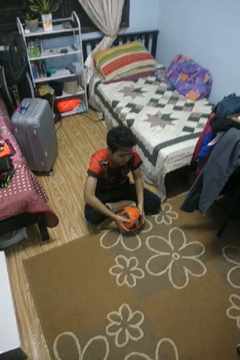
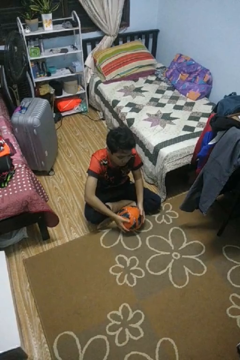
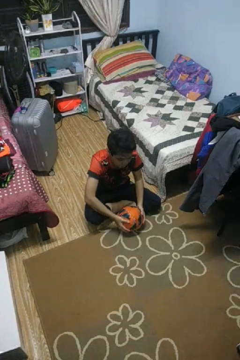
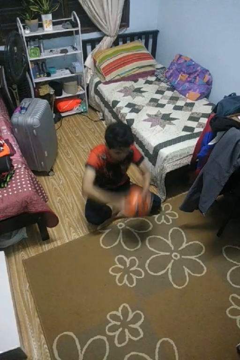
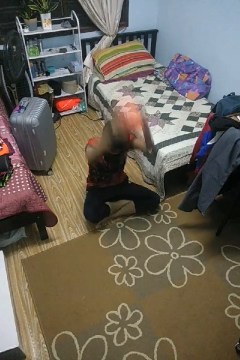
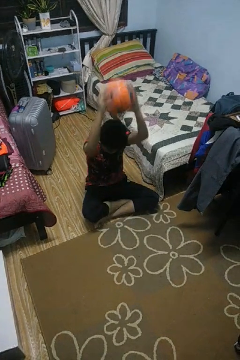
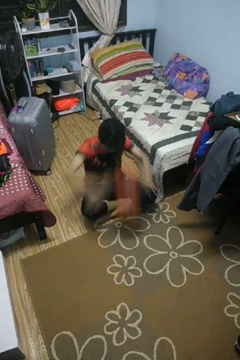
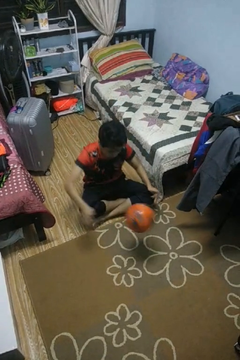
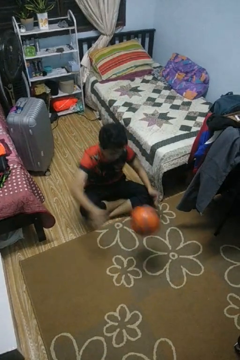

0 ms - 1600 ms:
person bounces ball on floor

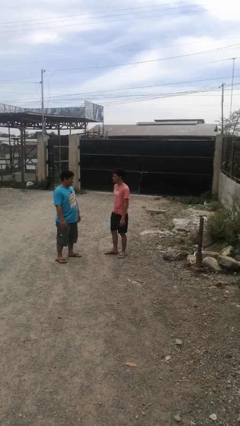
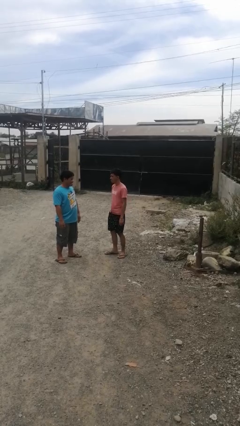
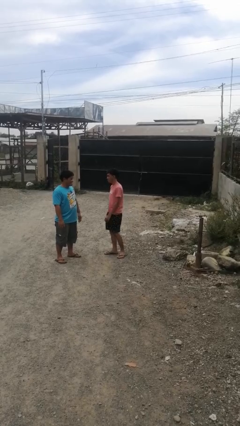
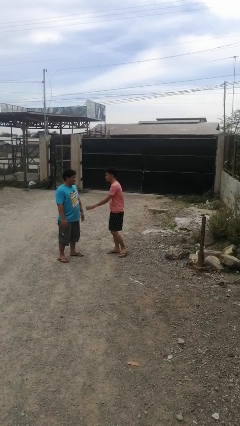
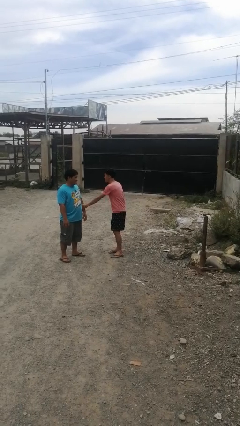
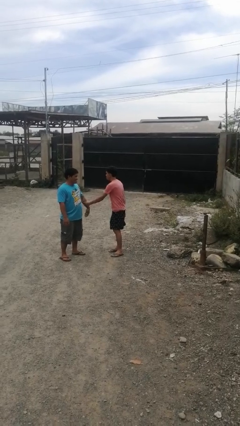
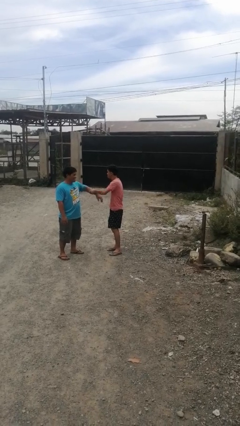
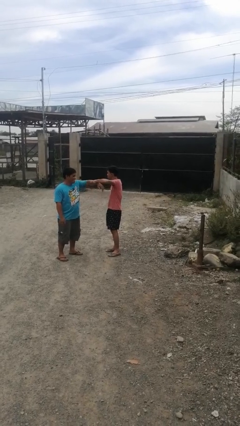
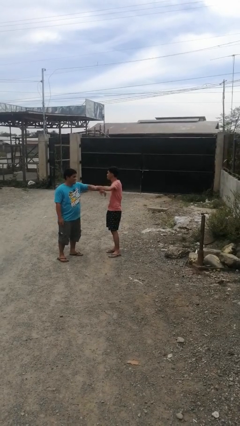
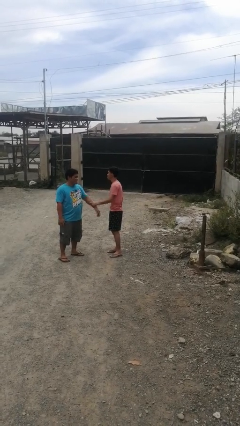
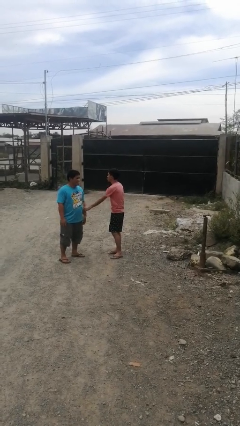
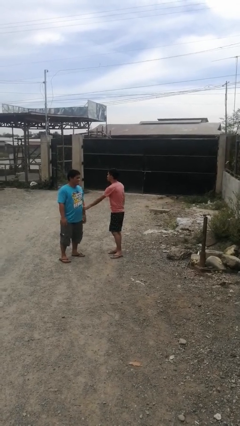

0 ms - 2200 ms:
person grabs person by forearm

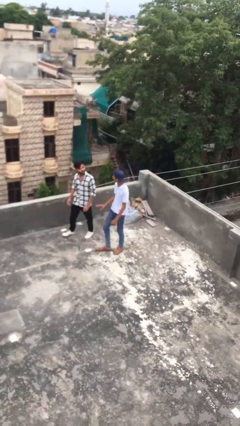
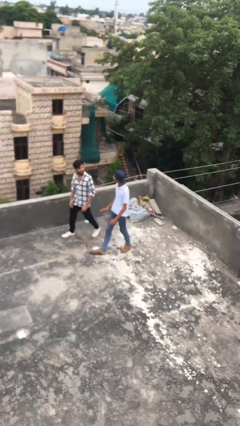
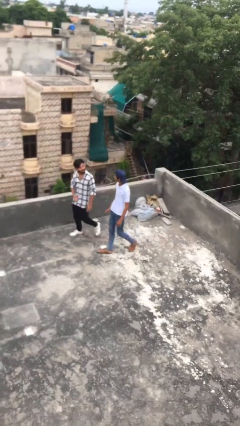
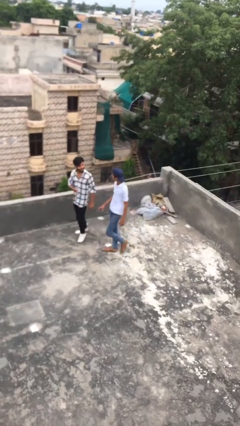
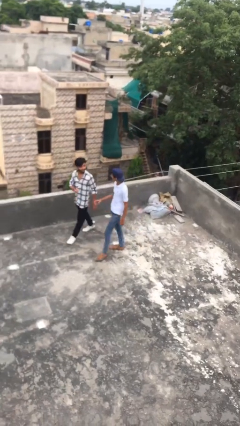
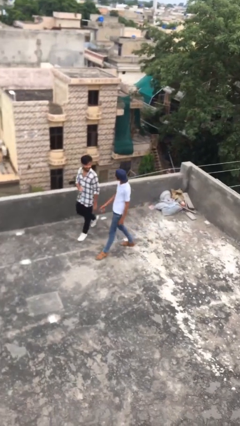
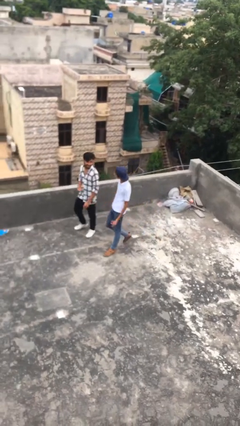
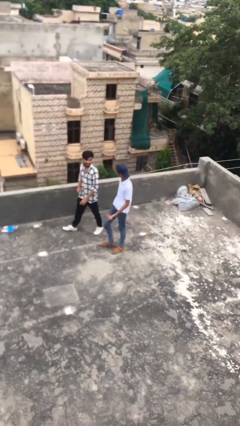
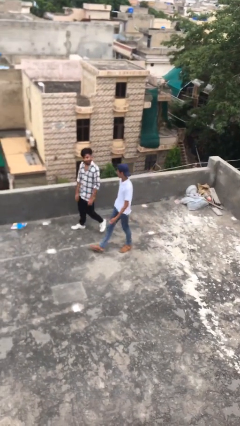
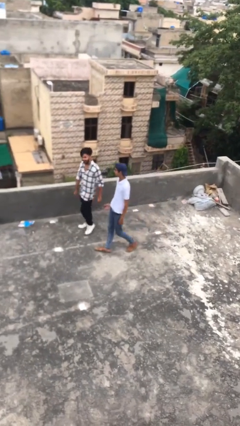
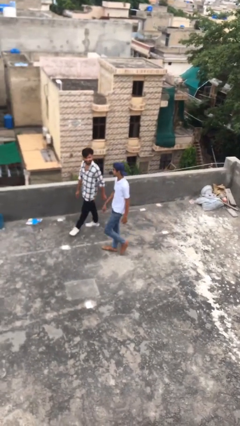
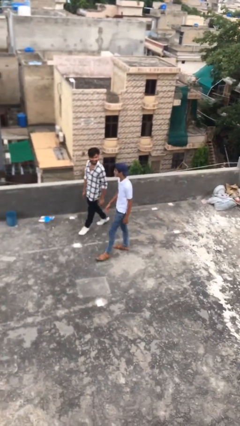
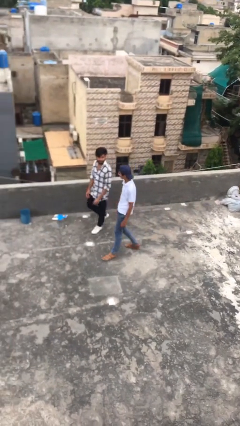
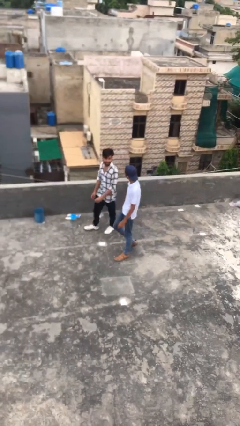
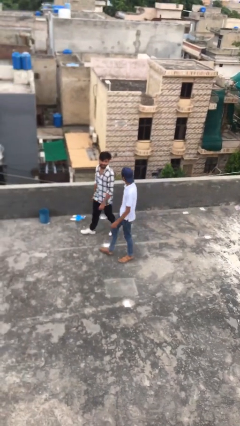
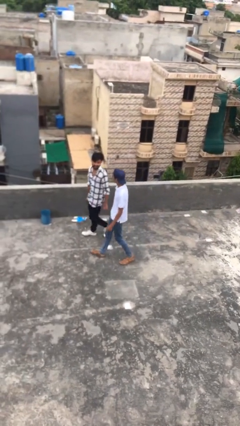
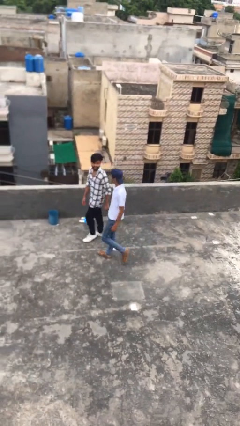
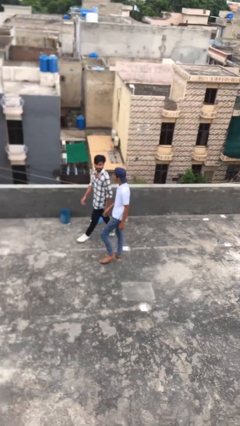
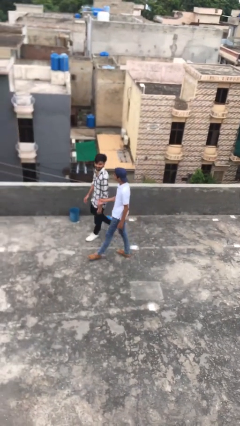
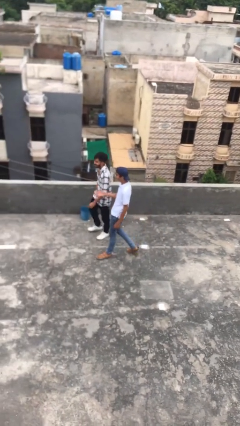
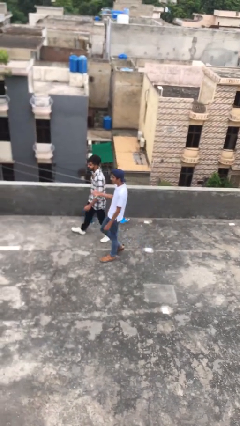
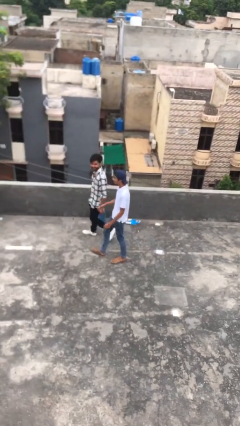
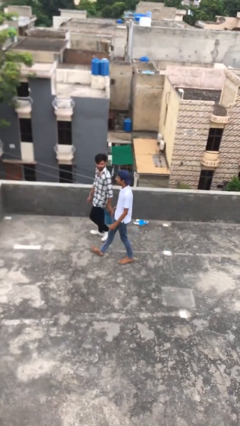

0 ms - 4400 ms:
person talks to person

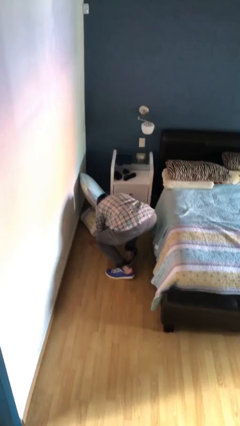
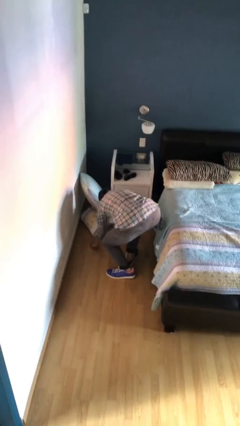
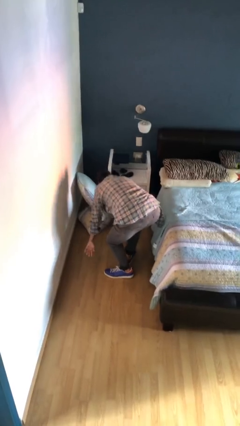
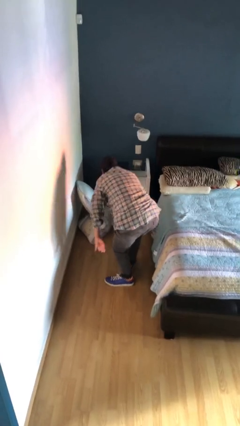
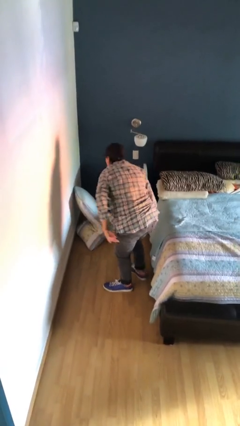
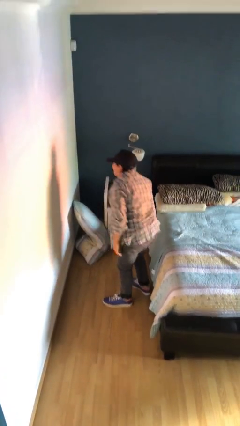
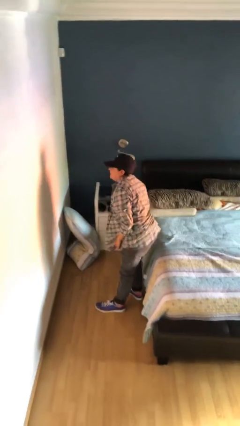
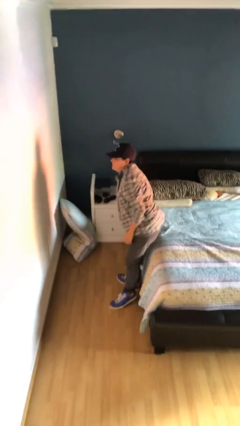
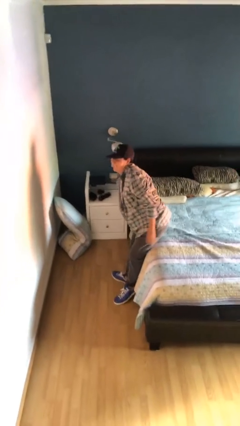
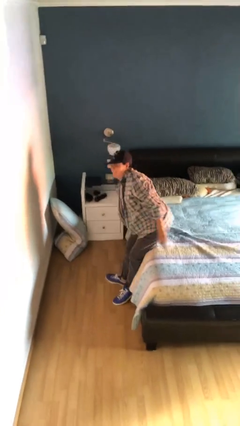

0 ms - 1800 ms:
person stands up from floor

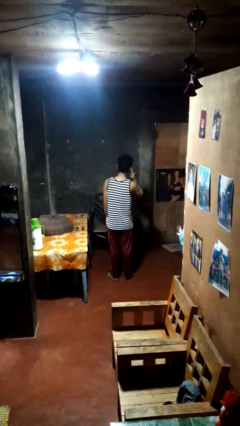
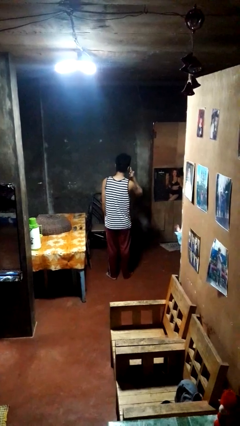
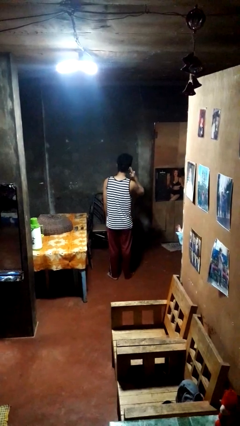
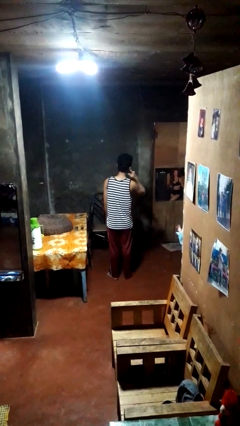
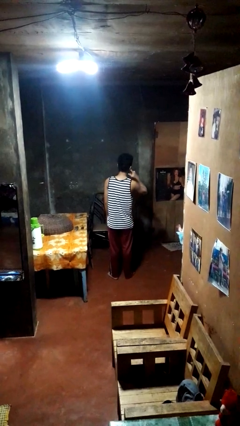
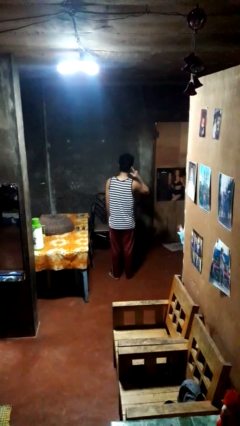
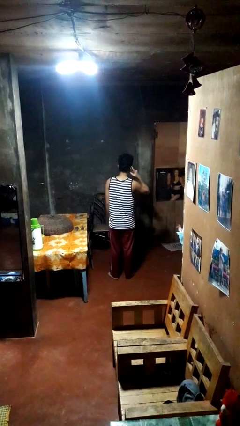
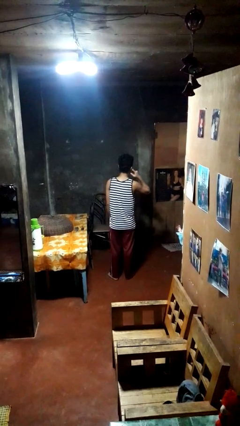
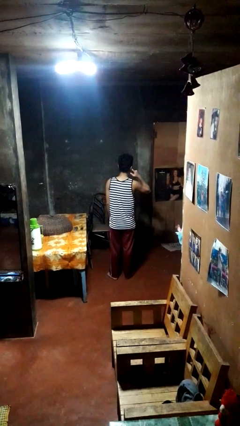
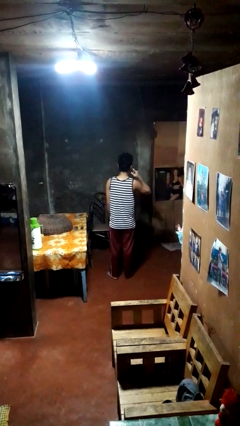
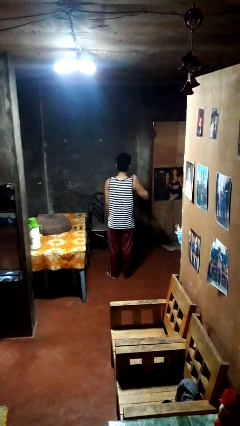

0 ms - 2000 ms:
person gestures listen closely

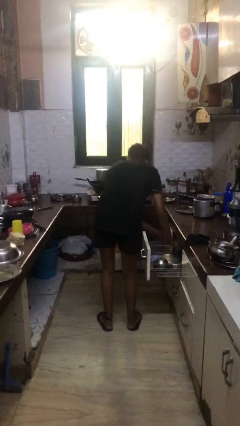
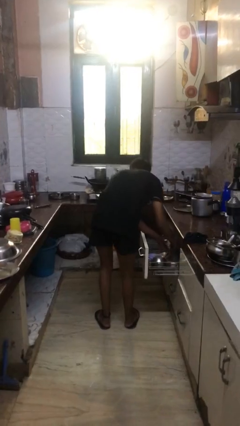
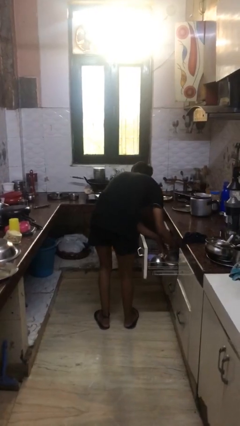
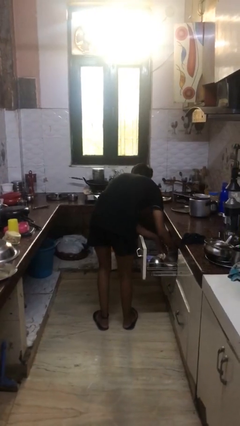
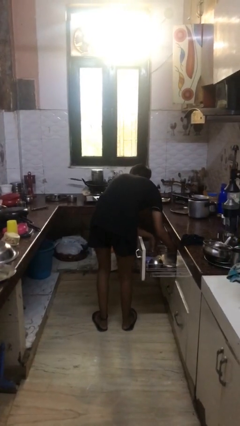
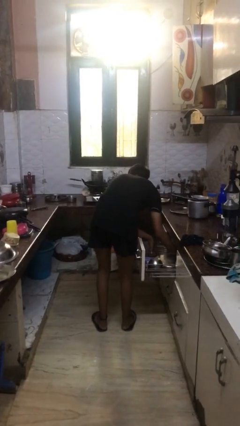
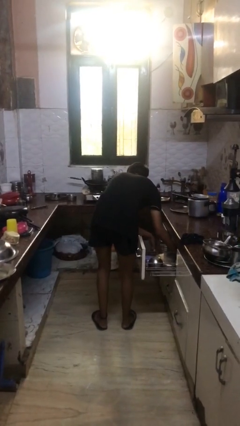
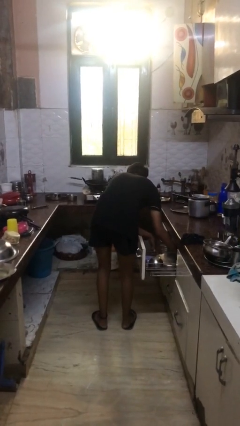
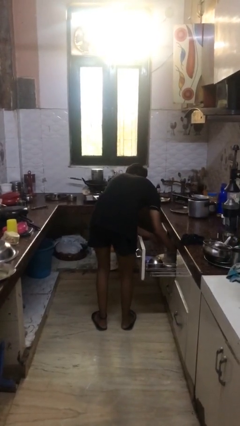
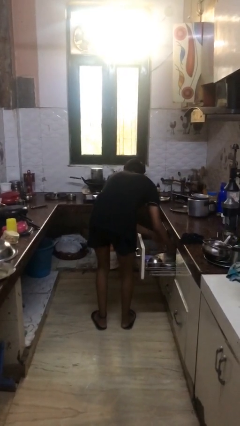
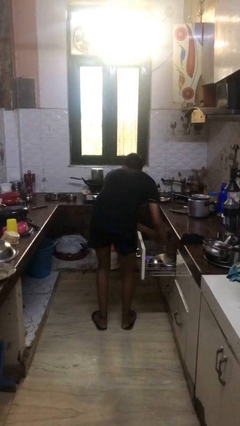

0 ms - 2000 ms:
person searches in kitchen drawer

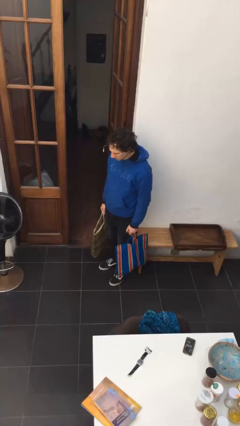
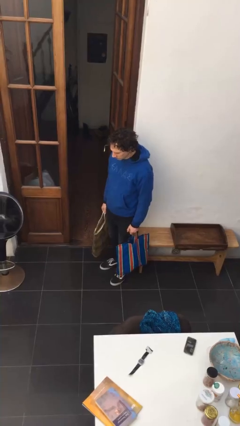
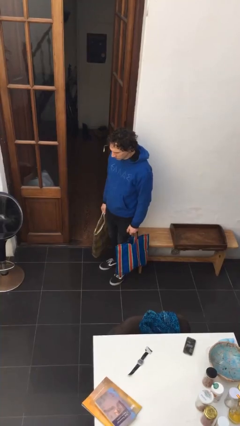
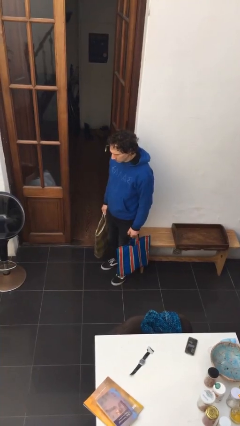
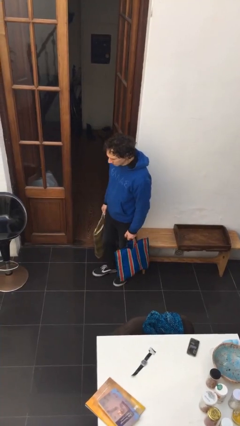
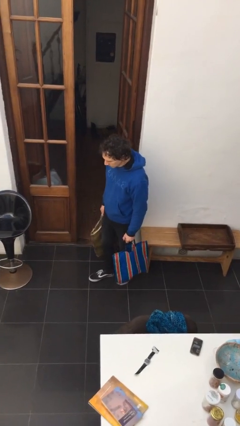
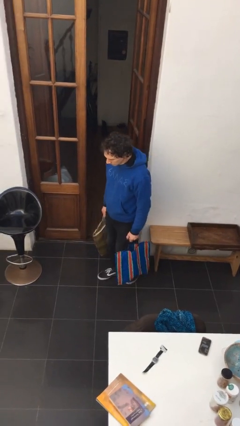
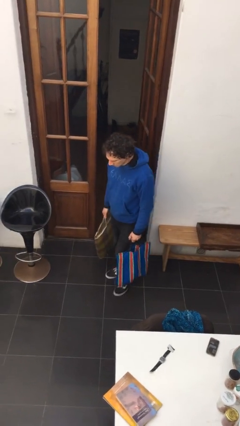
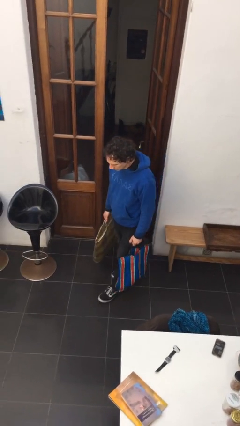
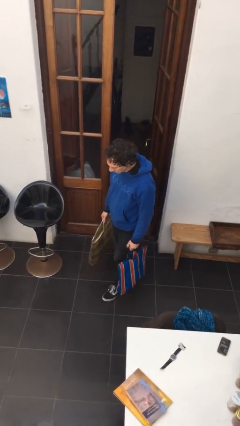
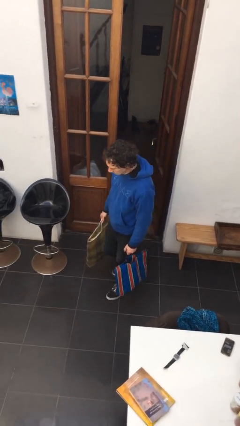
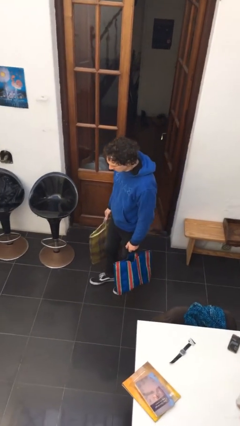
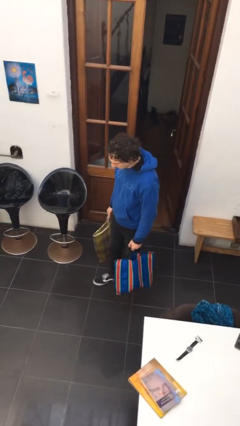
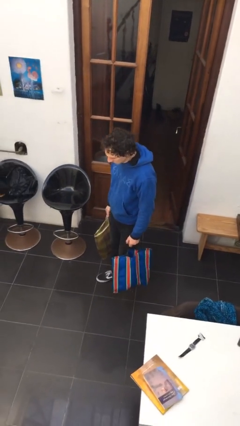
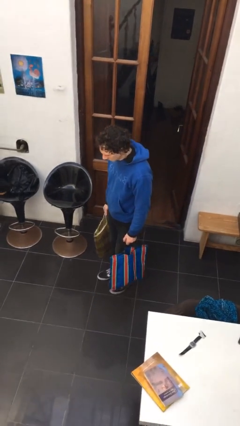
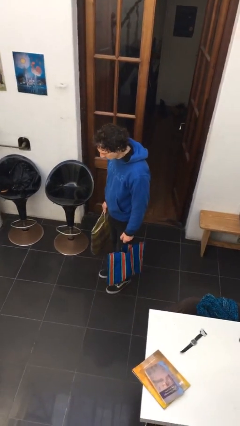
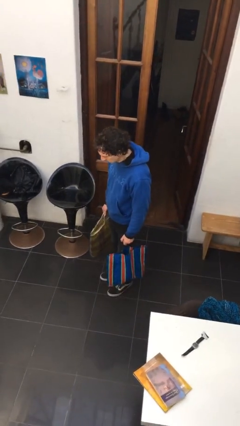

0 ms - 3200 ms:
person carries groceries
